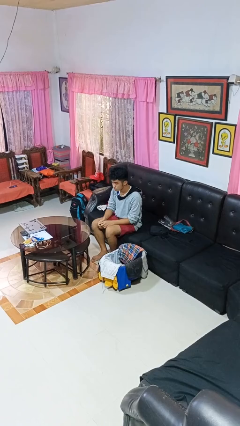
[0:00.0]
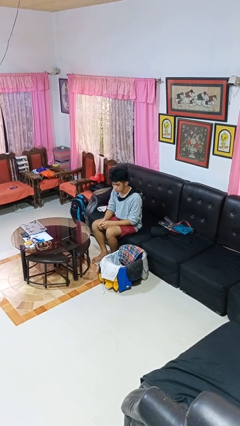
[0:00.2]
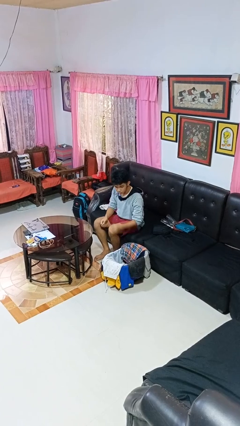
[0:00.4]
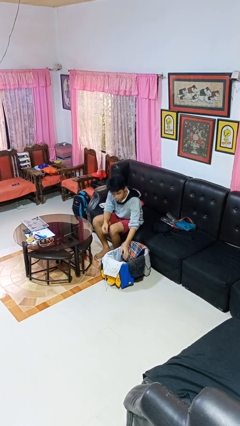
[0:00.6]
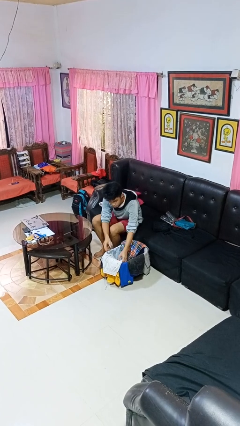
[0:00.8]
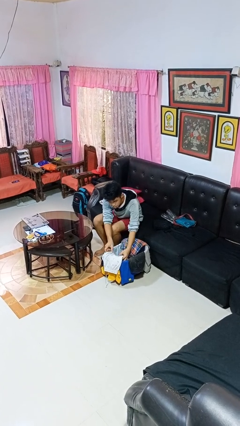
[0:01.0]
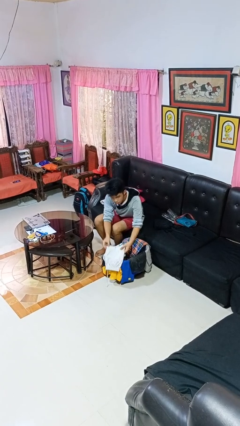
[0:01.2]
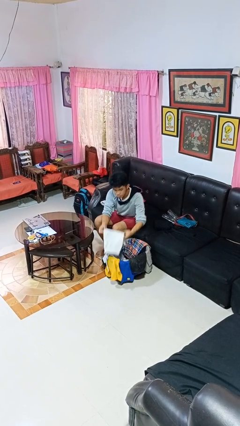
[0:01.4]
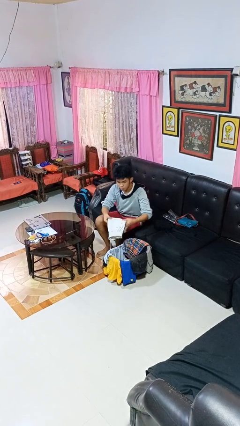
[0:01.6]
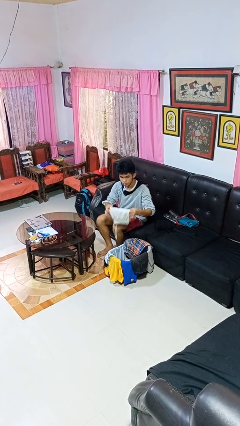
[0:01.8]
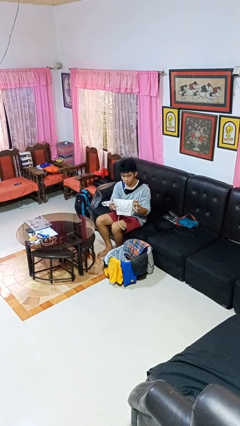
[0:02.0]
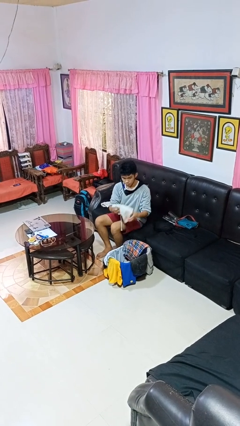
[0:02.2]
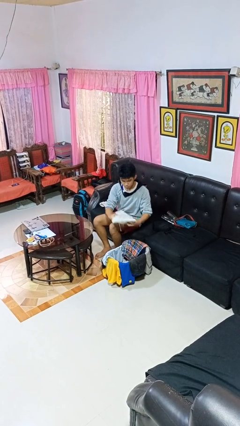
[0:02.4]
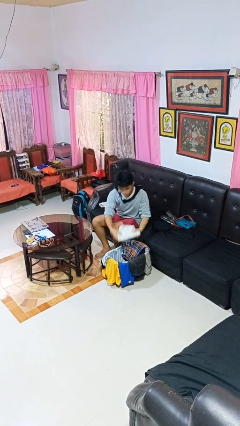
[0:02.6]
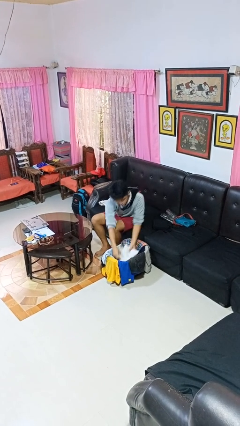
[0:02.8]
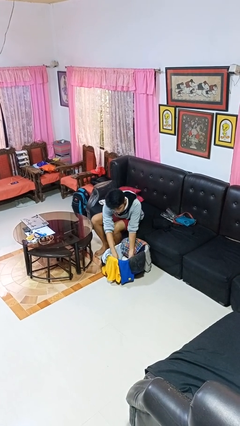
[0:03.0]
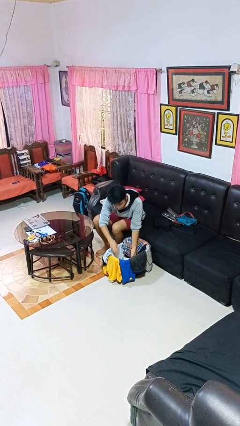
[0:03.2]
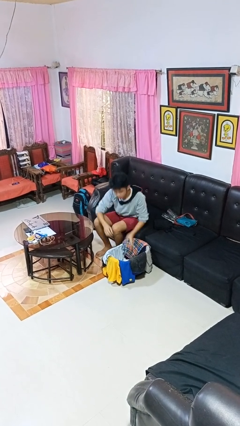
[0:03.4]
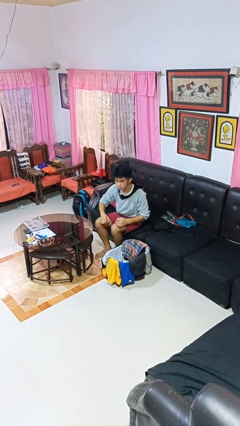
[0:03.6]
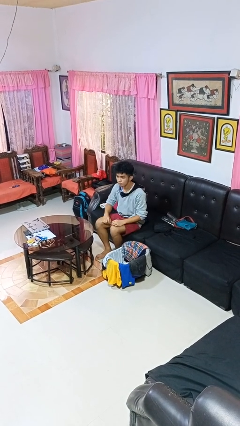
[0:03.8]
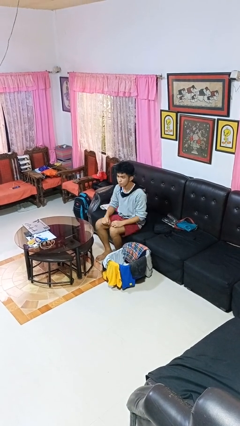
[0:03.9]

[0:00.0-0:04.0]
person folds pants

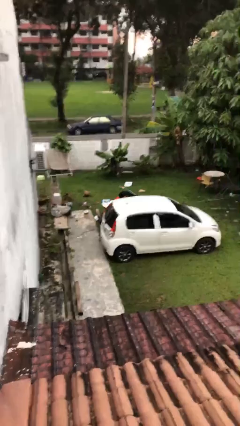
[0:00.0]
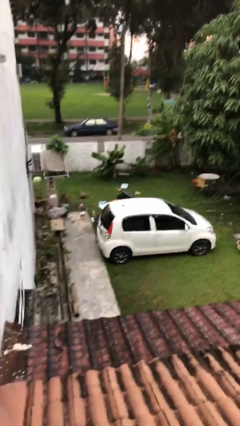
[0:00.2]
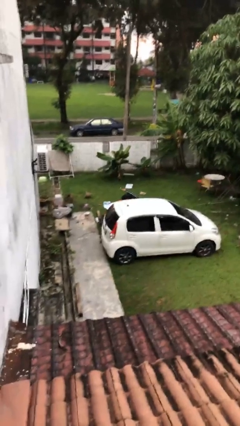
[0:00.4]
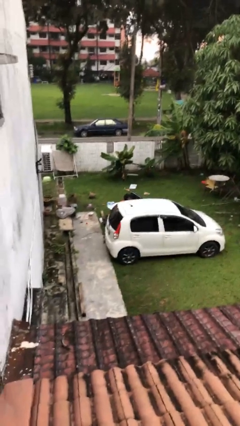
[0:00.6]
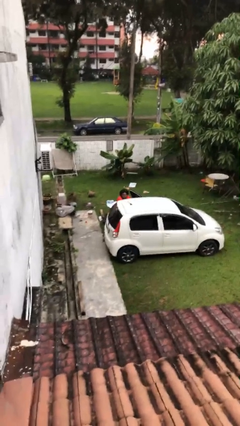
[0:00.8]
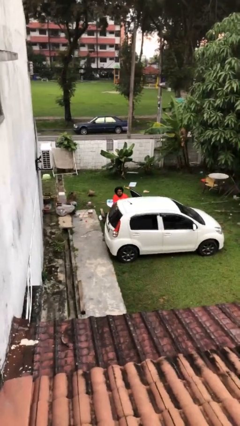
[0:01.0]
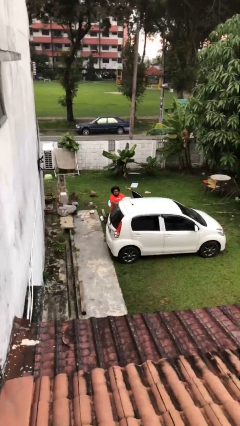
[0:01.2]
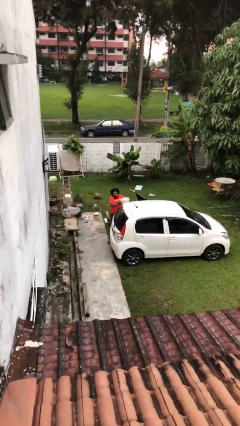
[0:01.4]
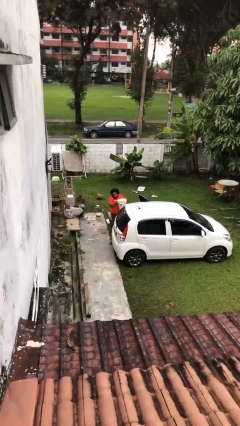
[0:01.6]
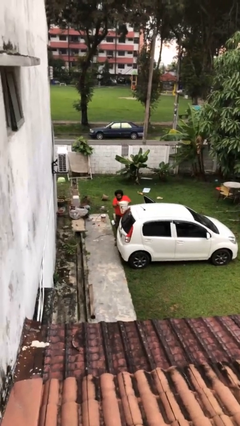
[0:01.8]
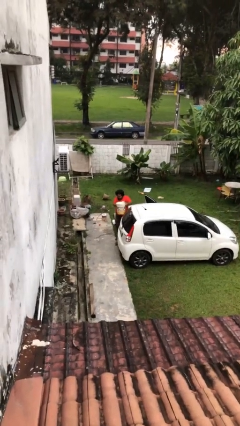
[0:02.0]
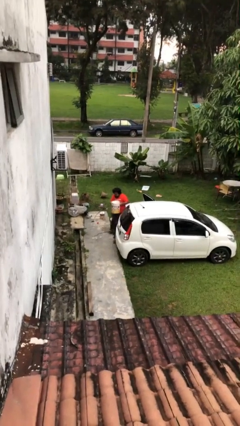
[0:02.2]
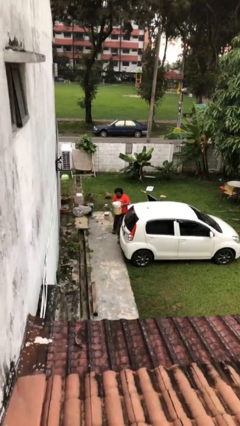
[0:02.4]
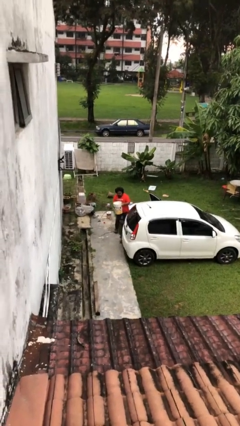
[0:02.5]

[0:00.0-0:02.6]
person unloads car

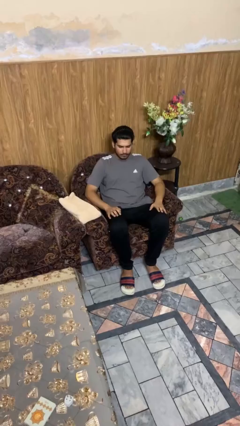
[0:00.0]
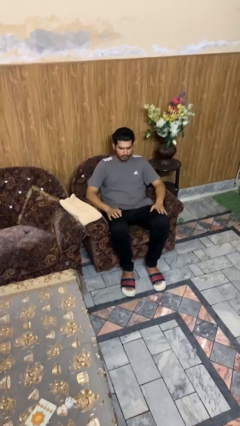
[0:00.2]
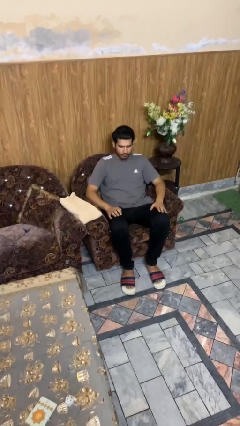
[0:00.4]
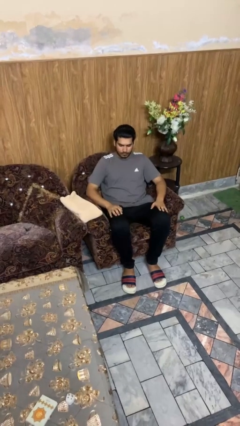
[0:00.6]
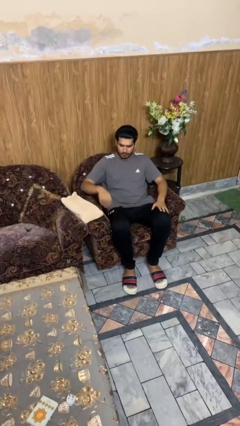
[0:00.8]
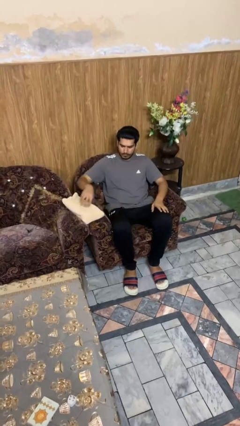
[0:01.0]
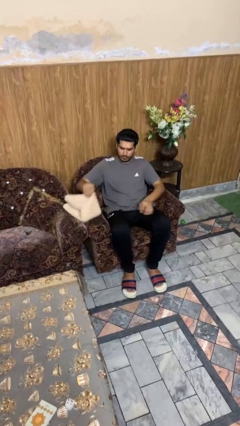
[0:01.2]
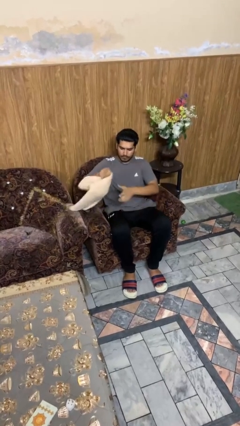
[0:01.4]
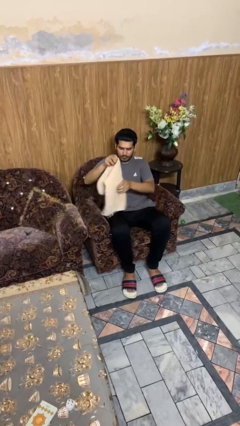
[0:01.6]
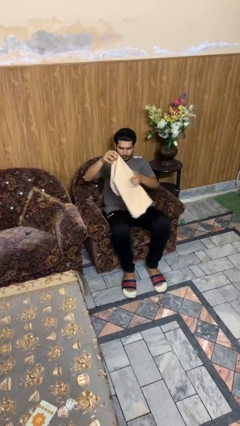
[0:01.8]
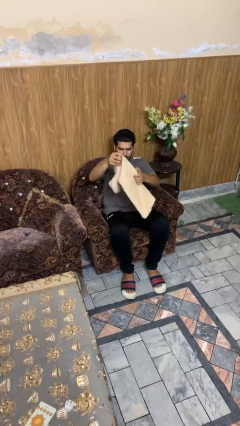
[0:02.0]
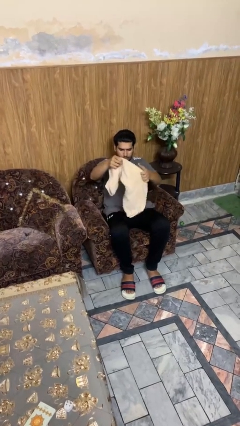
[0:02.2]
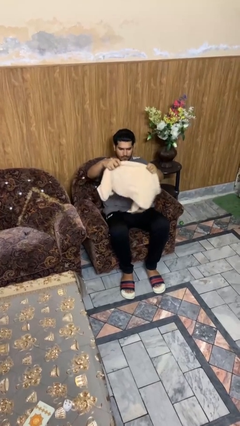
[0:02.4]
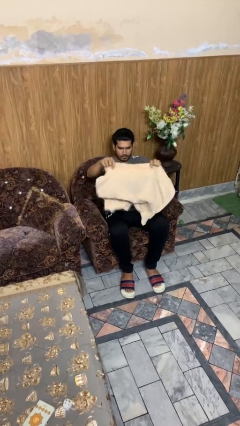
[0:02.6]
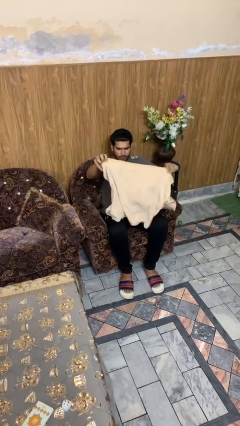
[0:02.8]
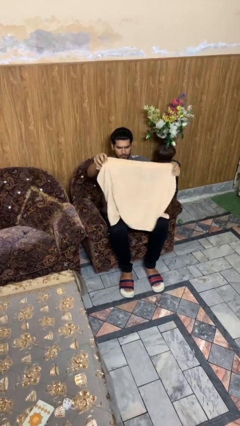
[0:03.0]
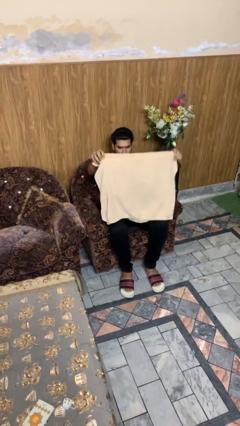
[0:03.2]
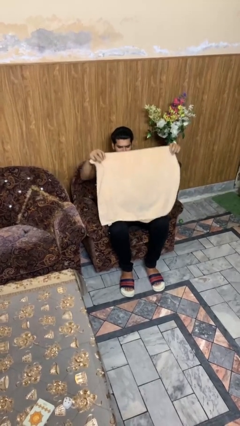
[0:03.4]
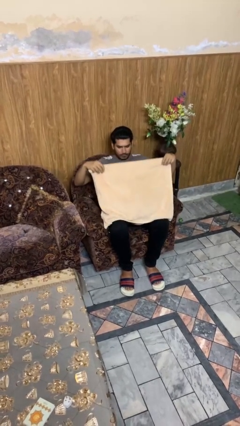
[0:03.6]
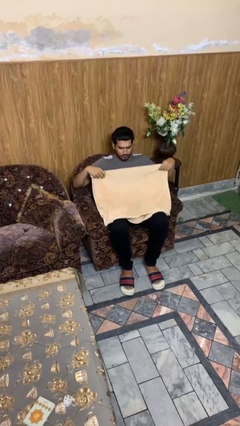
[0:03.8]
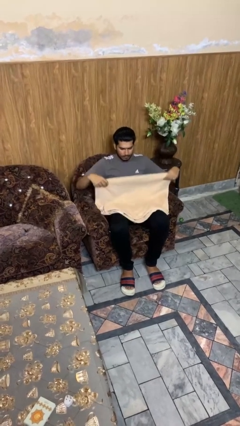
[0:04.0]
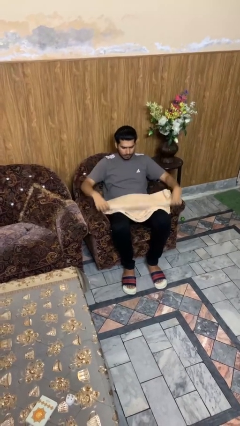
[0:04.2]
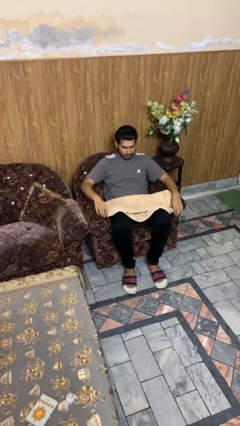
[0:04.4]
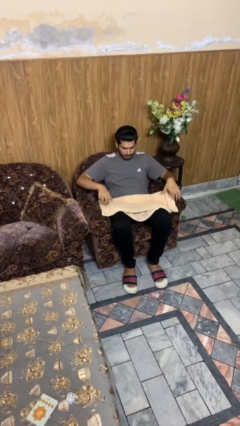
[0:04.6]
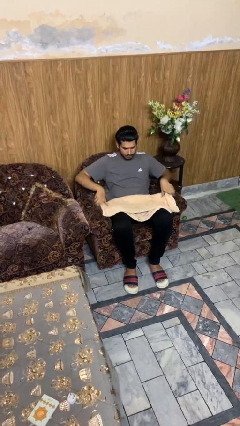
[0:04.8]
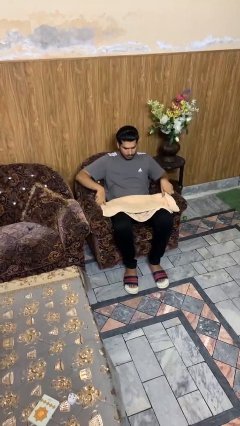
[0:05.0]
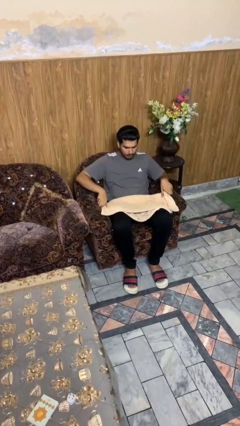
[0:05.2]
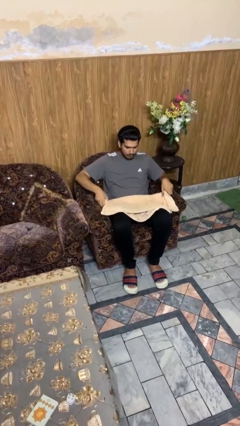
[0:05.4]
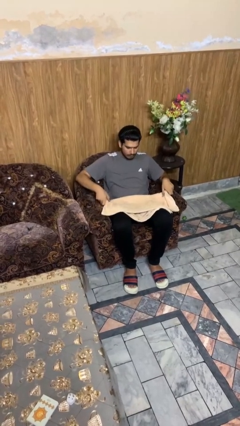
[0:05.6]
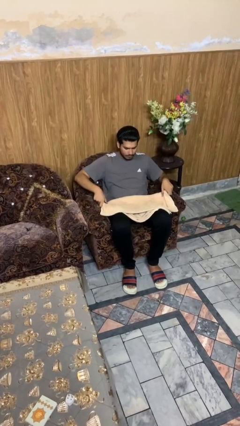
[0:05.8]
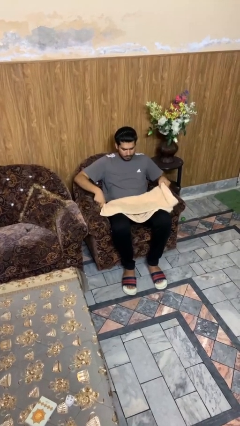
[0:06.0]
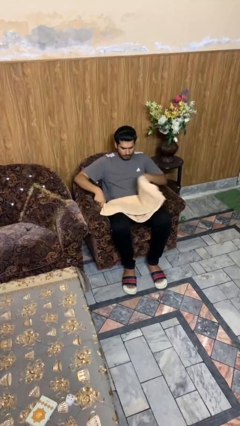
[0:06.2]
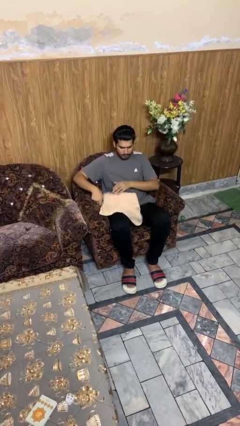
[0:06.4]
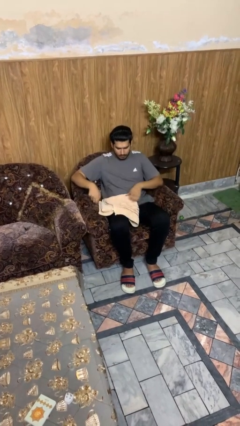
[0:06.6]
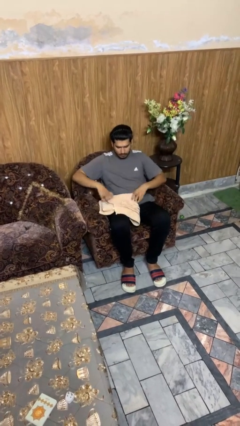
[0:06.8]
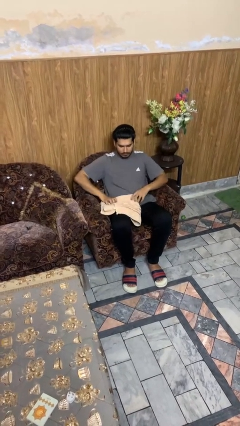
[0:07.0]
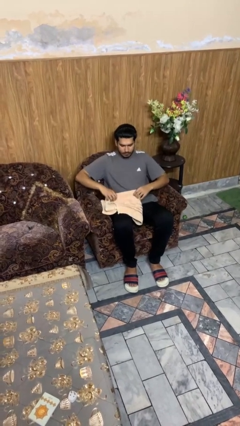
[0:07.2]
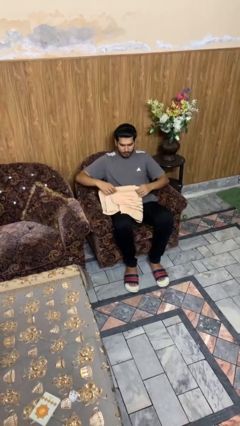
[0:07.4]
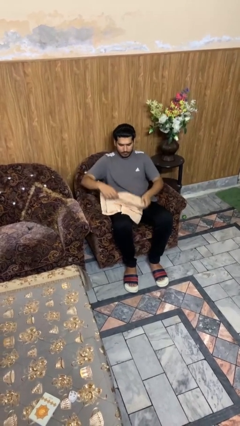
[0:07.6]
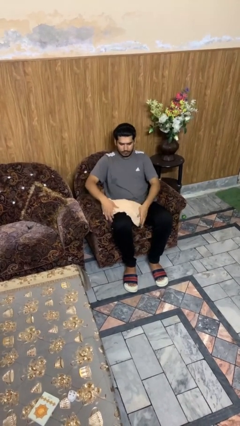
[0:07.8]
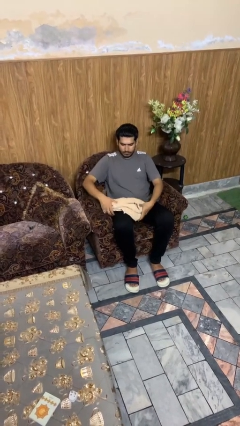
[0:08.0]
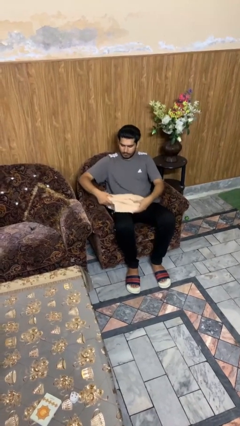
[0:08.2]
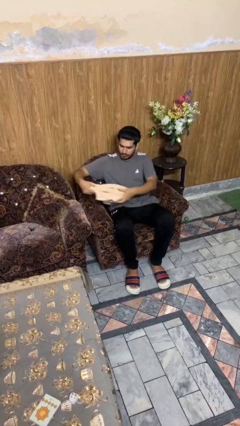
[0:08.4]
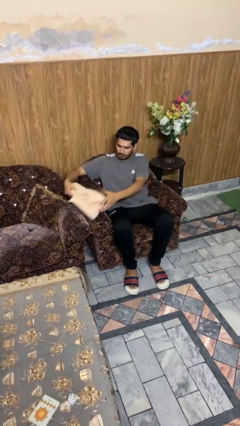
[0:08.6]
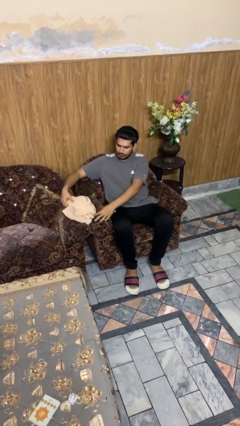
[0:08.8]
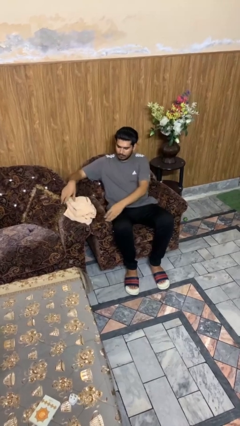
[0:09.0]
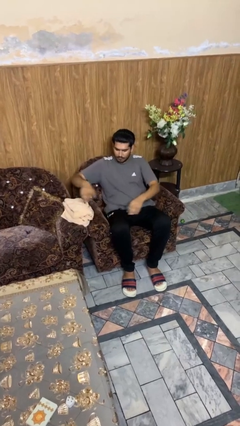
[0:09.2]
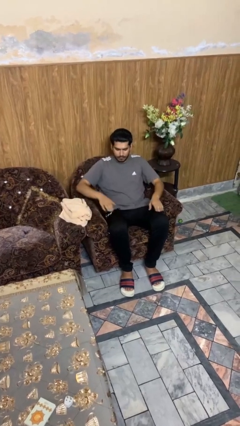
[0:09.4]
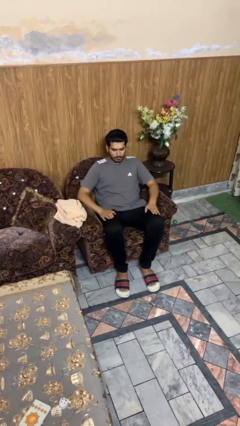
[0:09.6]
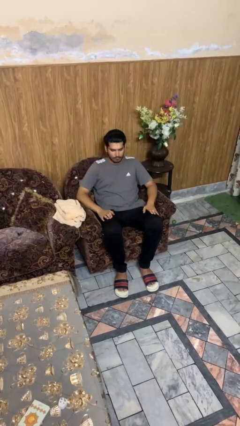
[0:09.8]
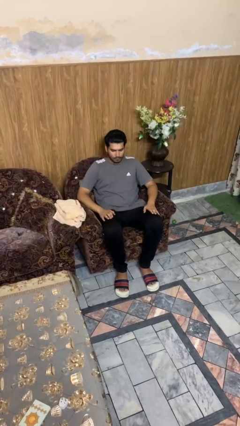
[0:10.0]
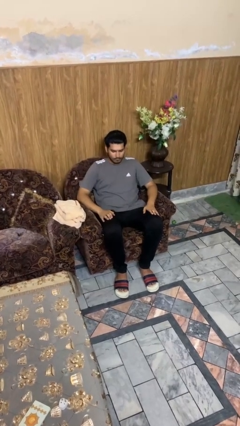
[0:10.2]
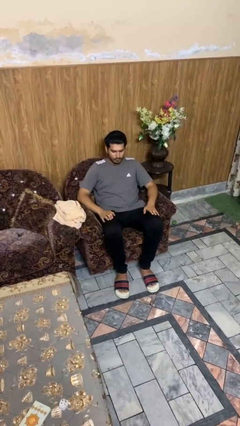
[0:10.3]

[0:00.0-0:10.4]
person folds towel

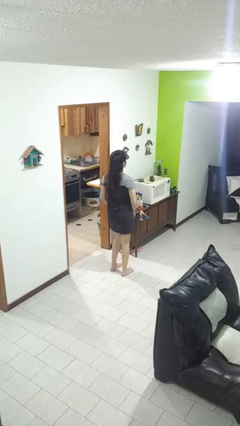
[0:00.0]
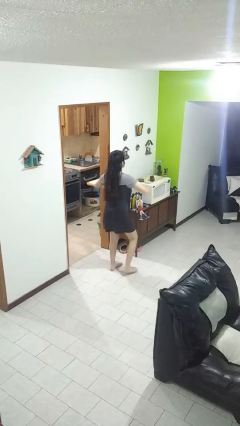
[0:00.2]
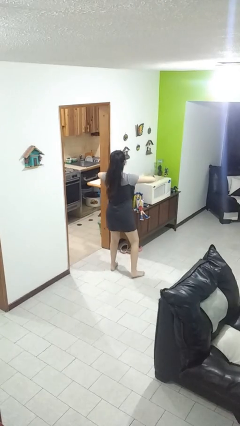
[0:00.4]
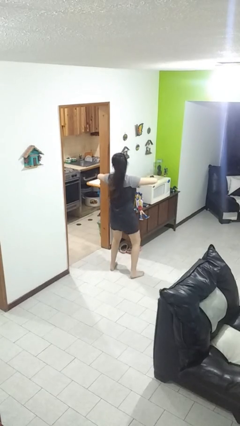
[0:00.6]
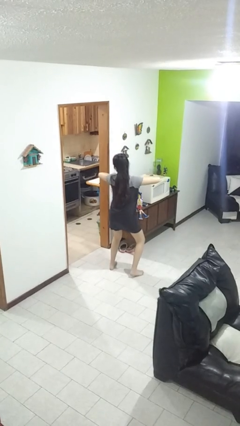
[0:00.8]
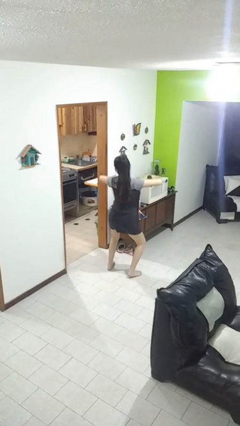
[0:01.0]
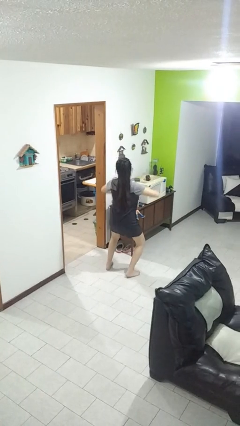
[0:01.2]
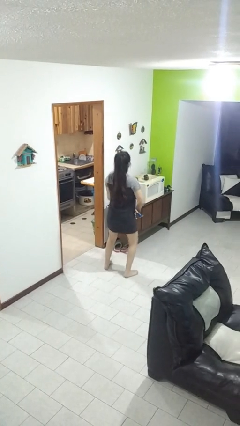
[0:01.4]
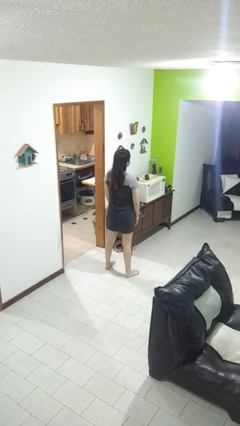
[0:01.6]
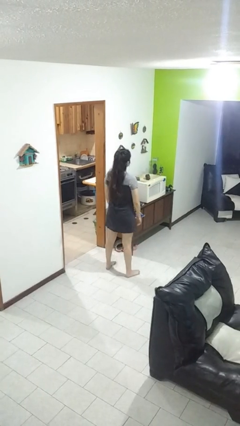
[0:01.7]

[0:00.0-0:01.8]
person dances in place
